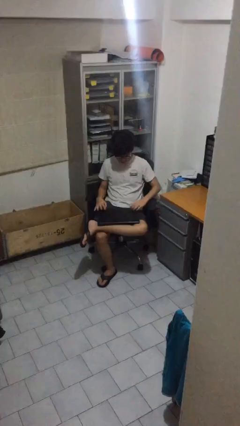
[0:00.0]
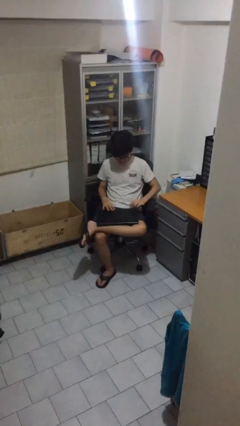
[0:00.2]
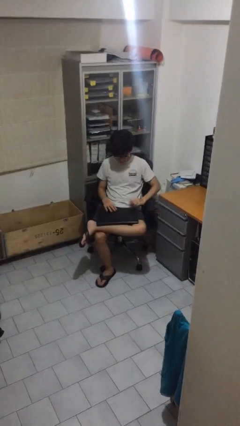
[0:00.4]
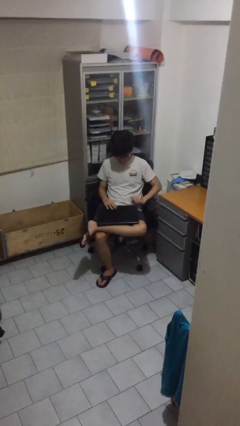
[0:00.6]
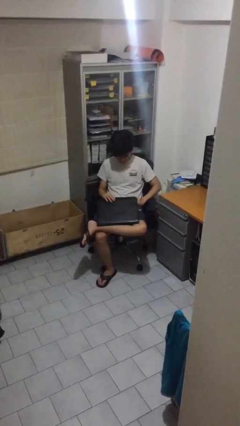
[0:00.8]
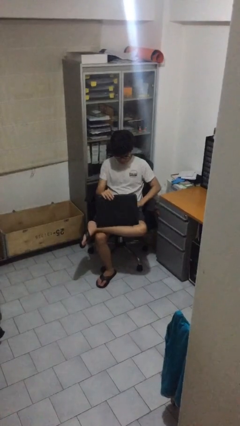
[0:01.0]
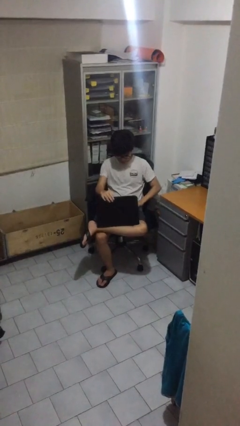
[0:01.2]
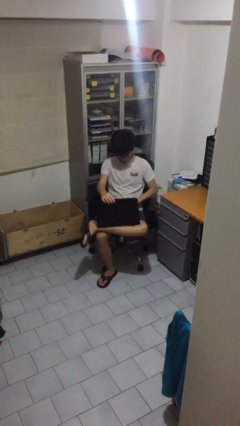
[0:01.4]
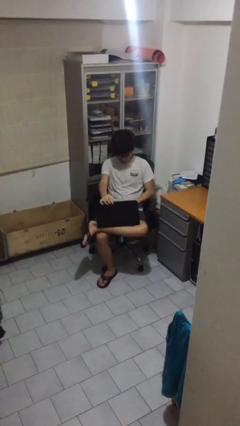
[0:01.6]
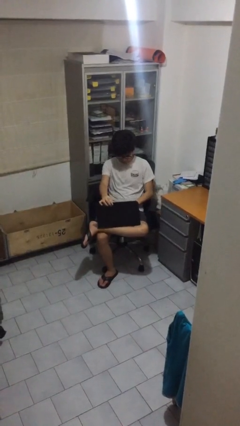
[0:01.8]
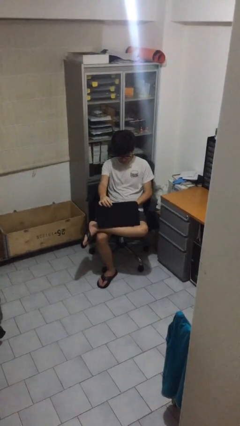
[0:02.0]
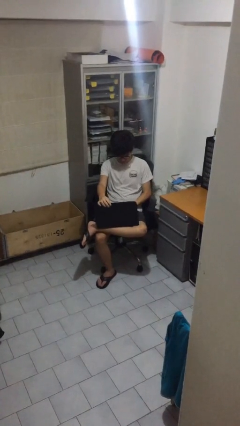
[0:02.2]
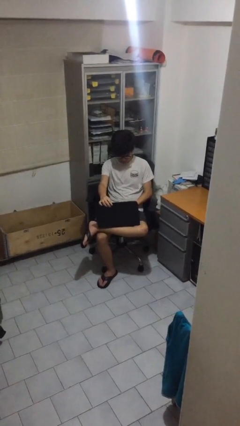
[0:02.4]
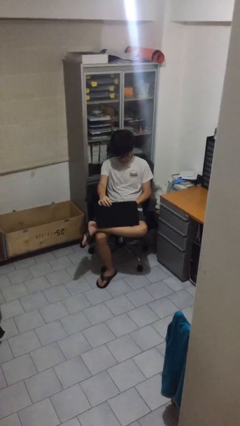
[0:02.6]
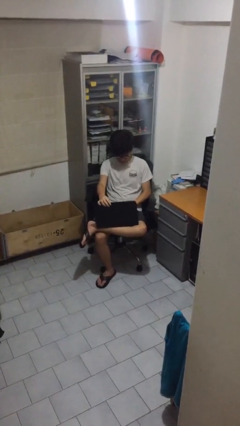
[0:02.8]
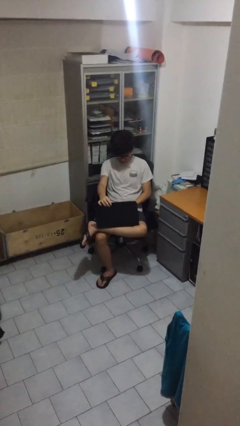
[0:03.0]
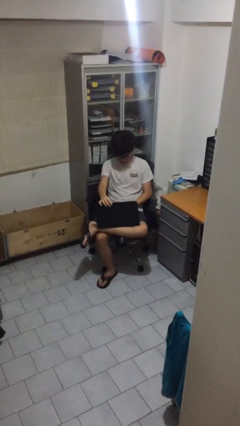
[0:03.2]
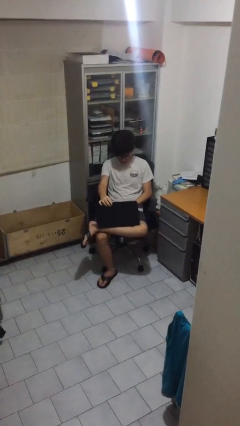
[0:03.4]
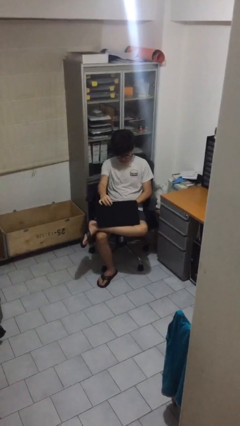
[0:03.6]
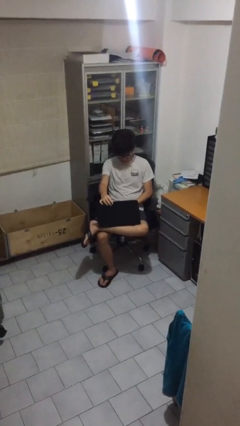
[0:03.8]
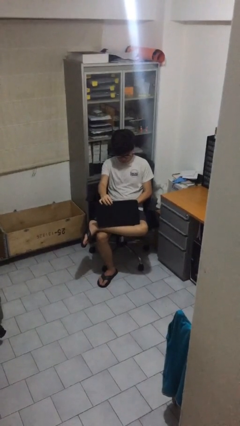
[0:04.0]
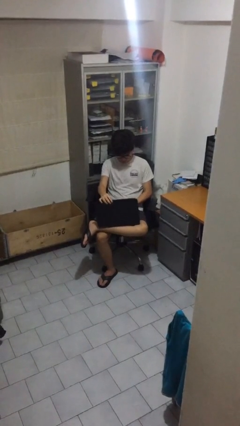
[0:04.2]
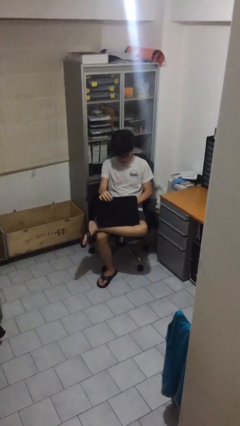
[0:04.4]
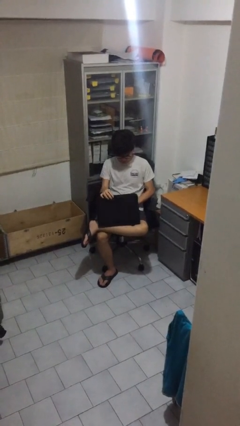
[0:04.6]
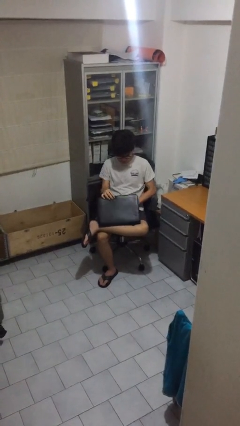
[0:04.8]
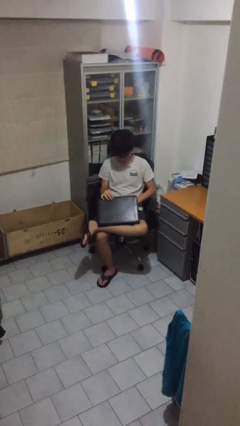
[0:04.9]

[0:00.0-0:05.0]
person interacts with laptop

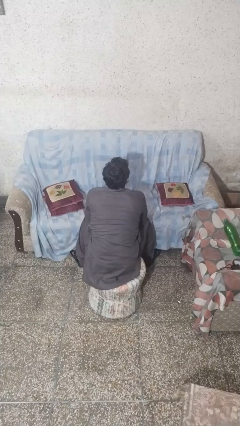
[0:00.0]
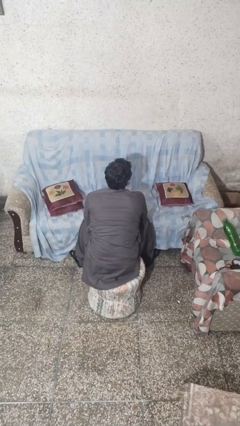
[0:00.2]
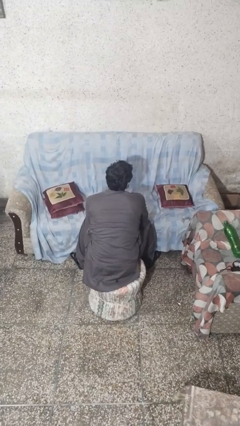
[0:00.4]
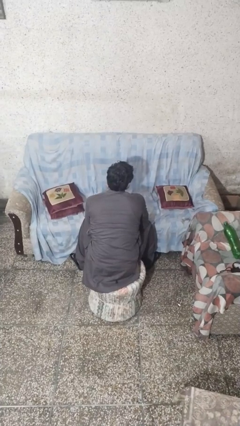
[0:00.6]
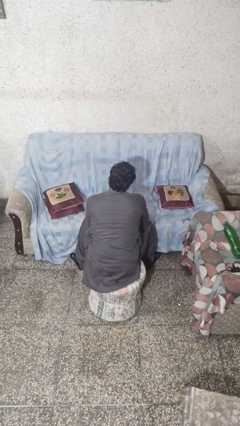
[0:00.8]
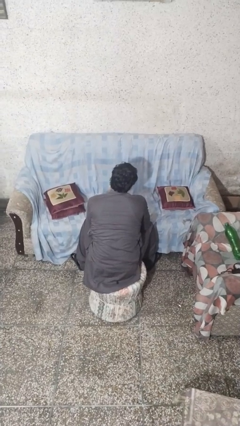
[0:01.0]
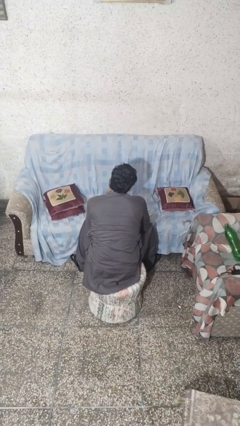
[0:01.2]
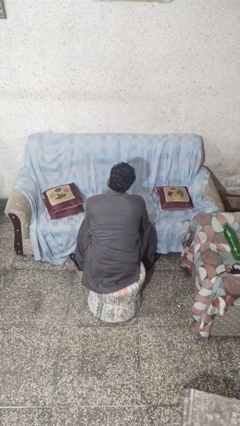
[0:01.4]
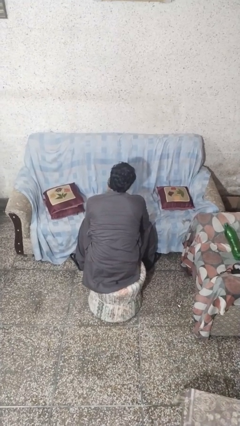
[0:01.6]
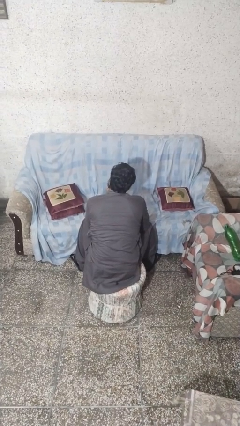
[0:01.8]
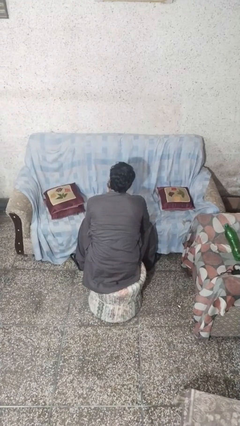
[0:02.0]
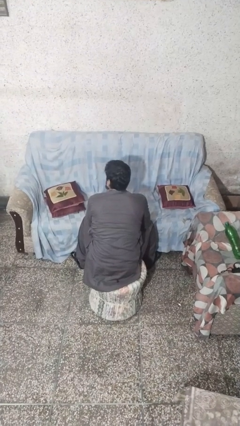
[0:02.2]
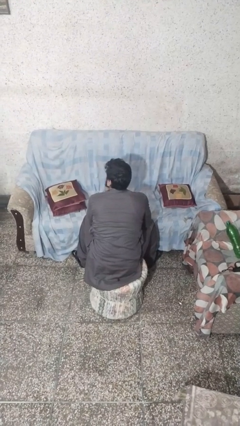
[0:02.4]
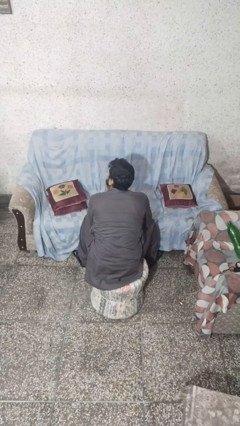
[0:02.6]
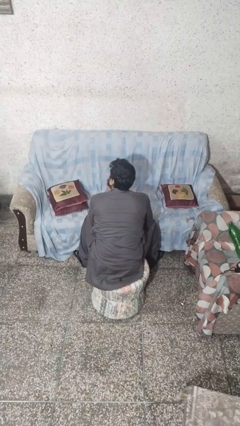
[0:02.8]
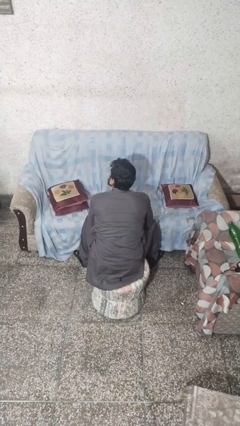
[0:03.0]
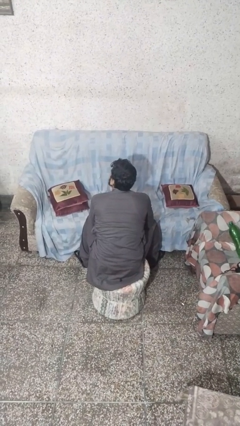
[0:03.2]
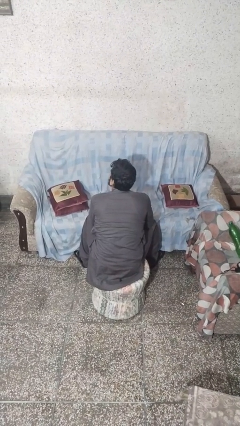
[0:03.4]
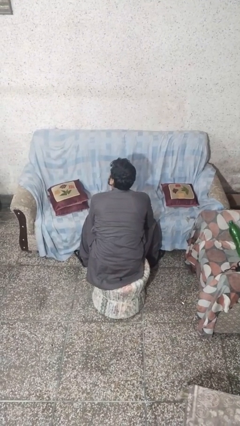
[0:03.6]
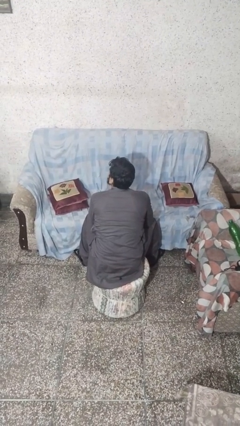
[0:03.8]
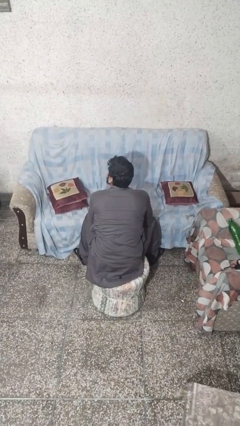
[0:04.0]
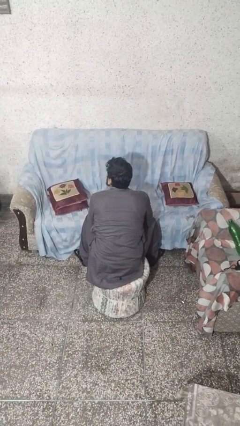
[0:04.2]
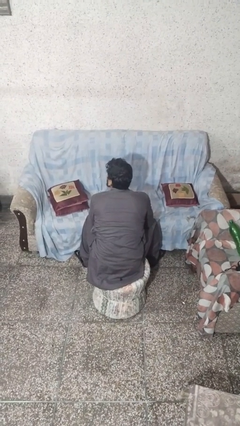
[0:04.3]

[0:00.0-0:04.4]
person strokes chin

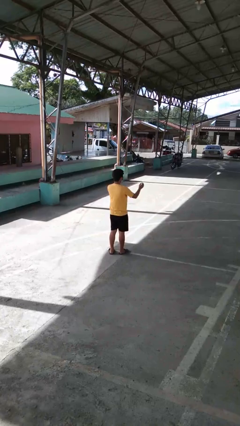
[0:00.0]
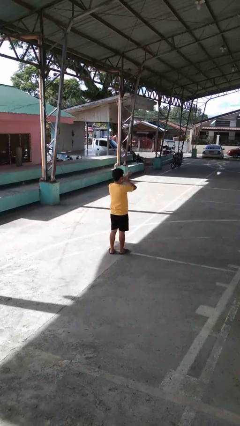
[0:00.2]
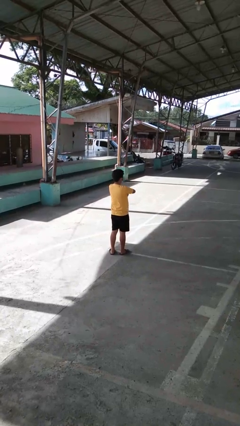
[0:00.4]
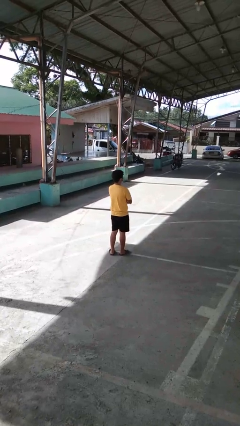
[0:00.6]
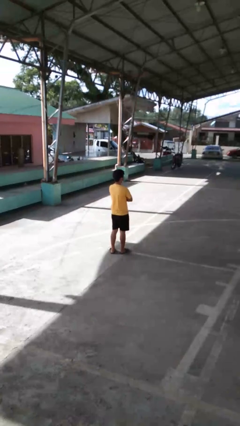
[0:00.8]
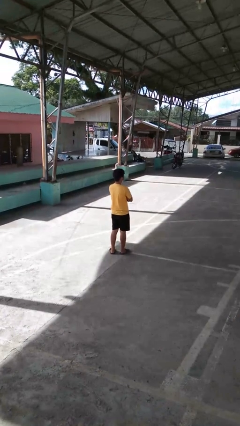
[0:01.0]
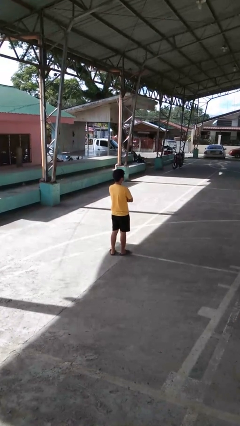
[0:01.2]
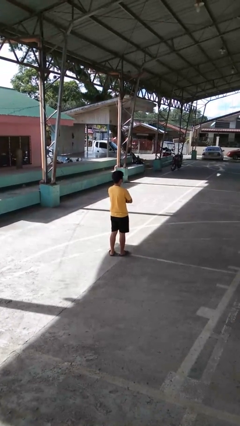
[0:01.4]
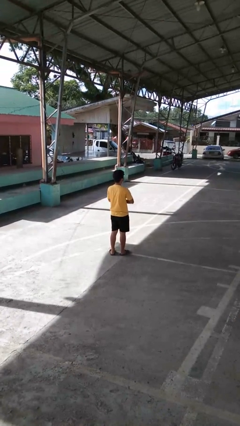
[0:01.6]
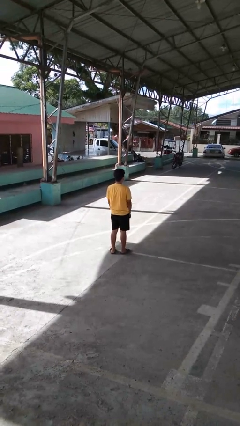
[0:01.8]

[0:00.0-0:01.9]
person crosses arms

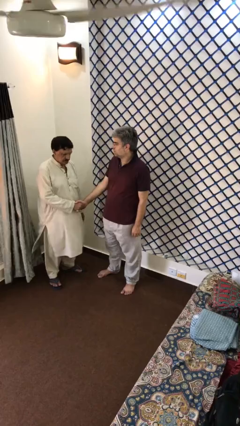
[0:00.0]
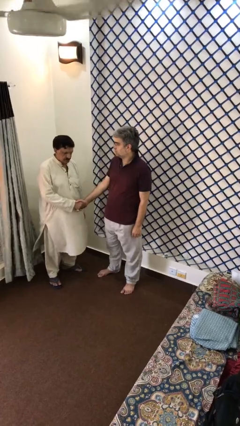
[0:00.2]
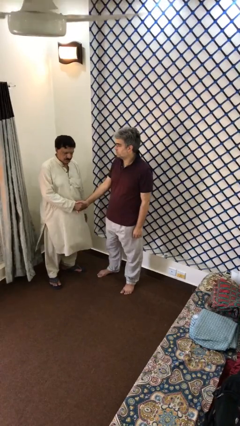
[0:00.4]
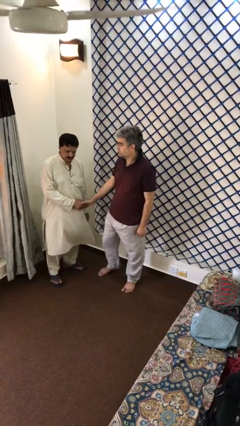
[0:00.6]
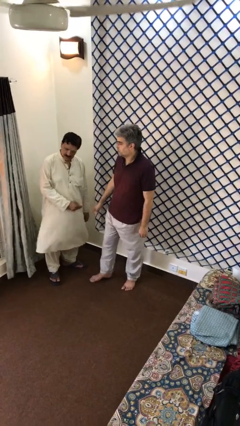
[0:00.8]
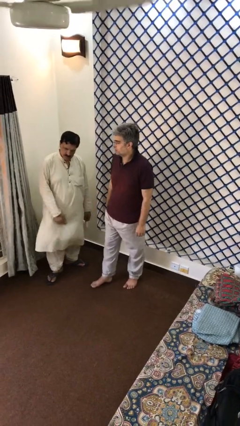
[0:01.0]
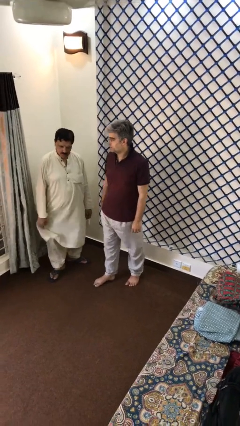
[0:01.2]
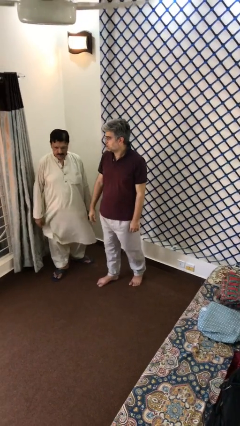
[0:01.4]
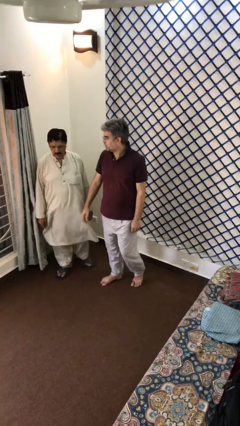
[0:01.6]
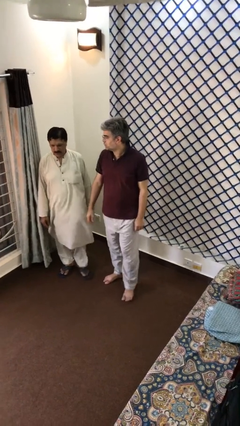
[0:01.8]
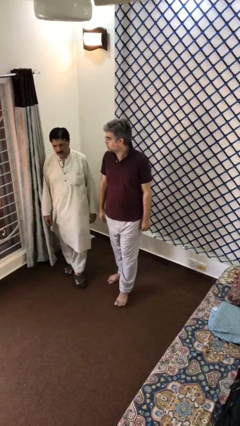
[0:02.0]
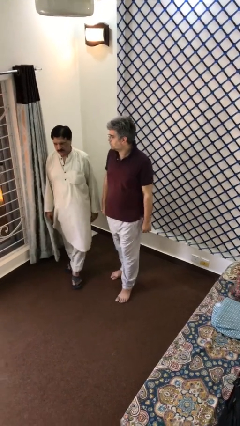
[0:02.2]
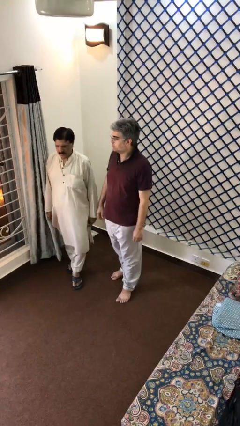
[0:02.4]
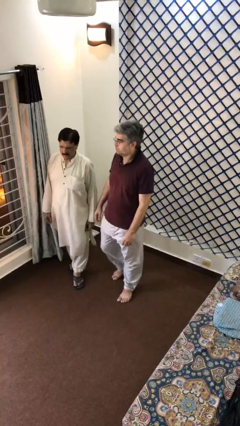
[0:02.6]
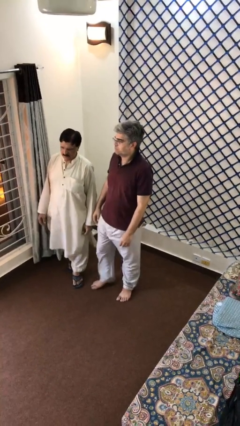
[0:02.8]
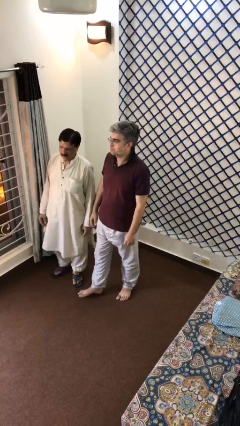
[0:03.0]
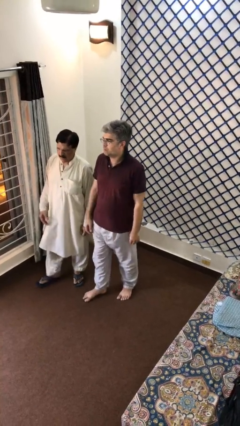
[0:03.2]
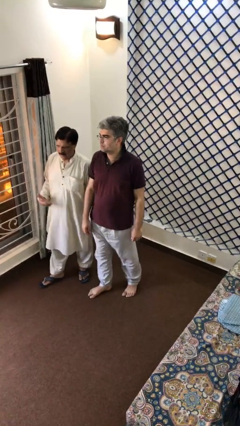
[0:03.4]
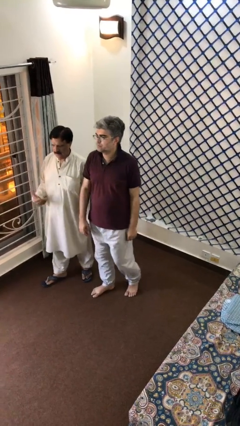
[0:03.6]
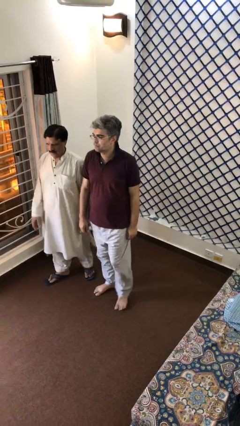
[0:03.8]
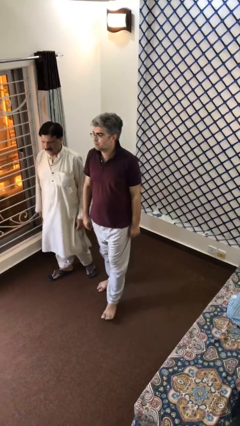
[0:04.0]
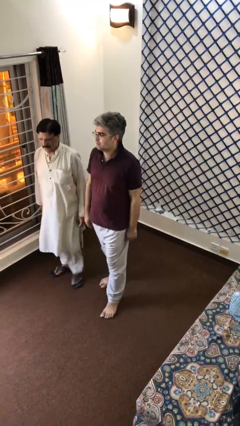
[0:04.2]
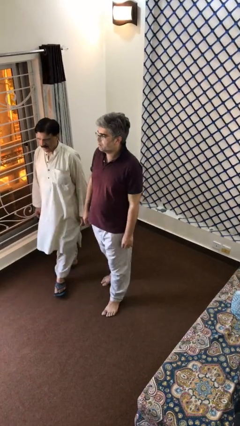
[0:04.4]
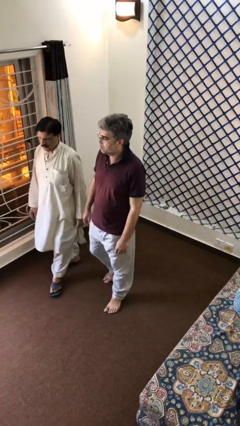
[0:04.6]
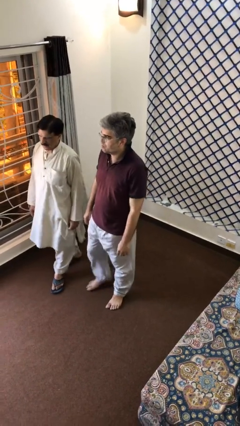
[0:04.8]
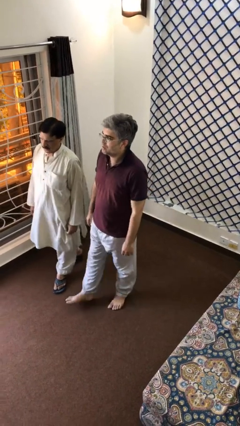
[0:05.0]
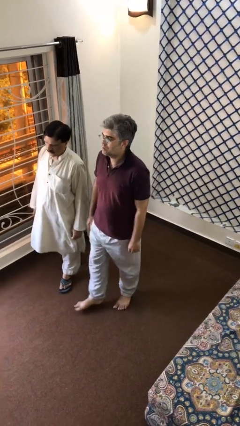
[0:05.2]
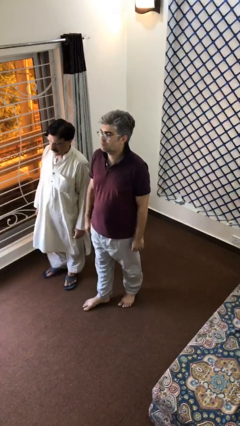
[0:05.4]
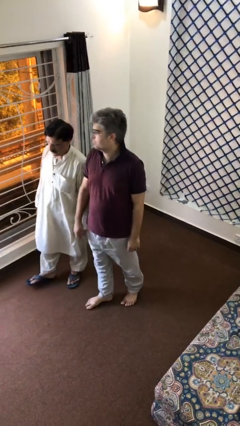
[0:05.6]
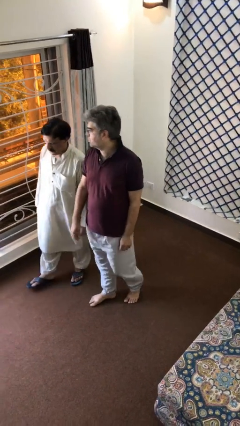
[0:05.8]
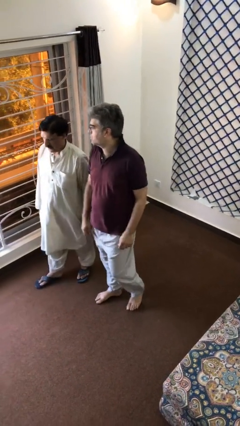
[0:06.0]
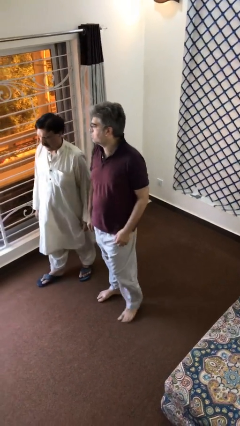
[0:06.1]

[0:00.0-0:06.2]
person talks to person

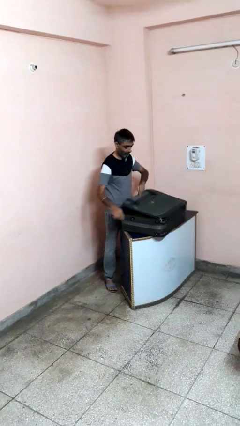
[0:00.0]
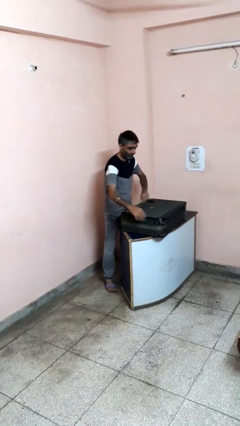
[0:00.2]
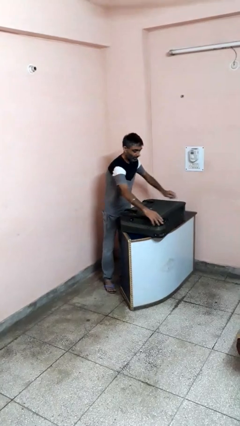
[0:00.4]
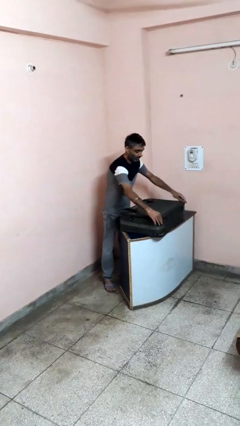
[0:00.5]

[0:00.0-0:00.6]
person closes suitcase
